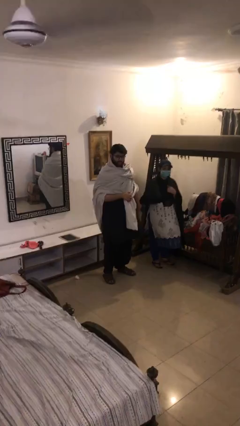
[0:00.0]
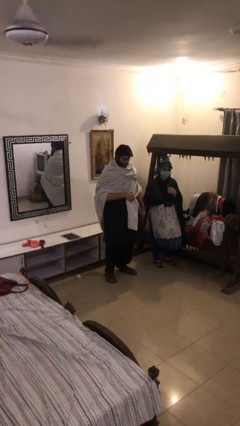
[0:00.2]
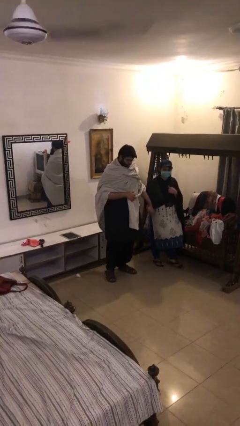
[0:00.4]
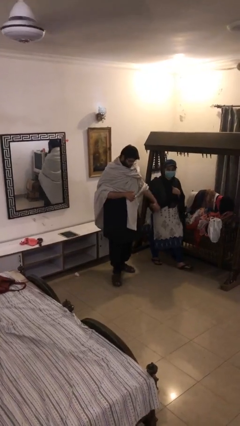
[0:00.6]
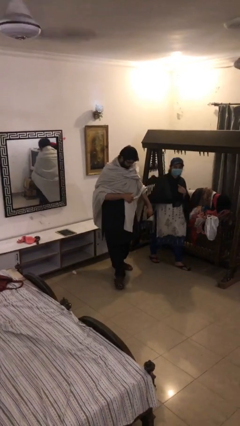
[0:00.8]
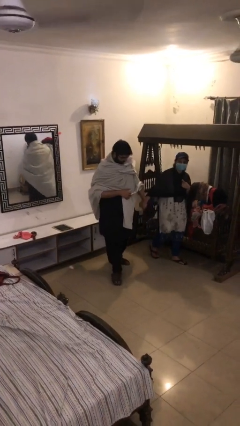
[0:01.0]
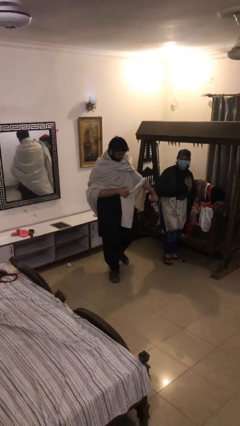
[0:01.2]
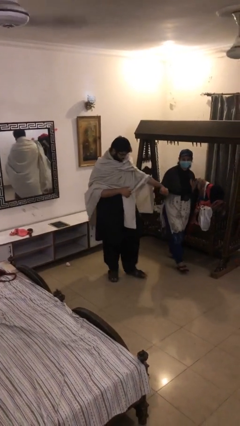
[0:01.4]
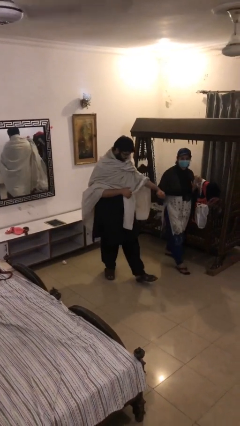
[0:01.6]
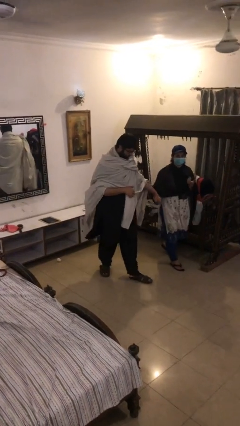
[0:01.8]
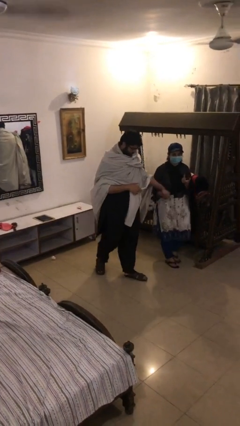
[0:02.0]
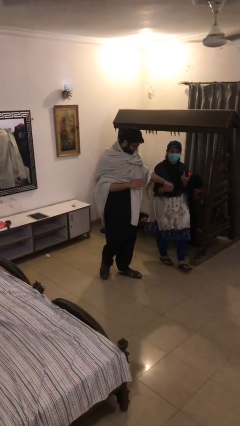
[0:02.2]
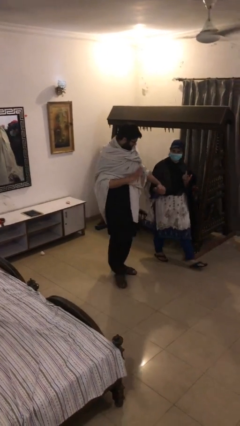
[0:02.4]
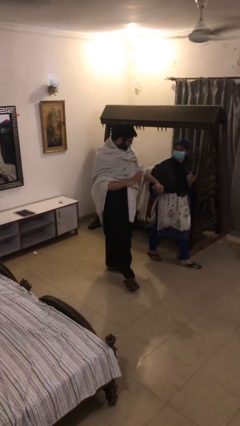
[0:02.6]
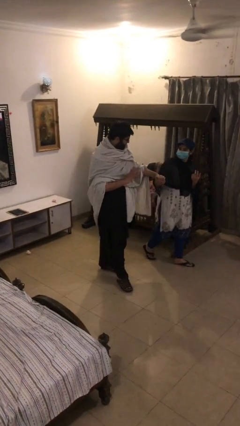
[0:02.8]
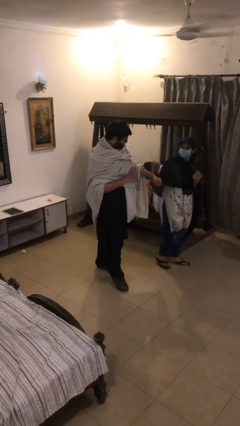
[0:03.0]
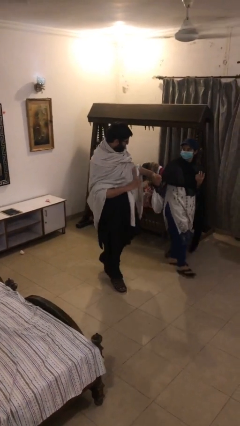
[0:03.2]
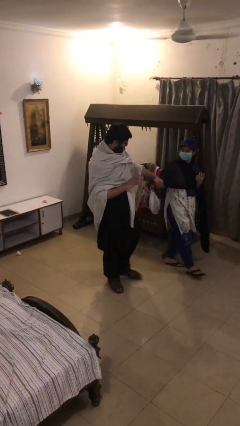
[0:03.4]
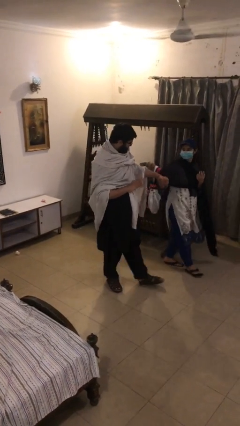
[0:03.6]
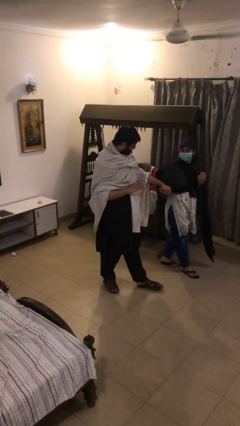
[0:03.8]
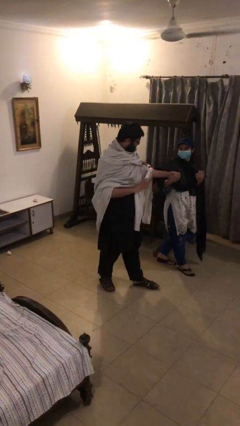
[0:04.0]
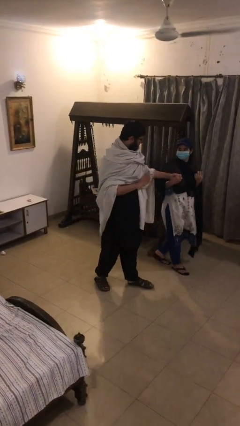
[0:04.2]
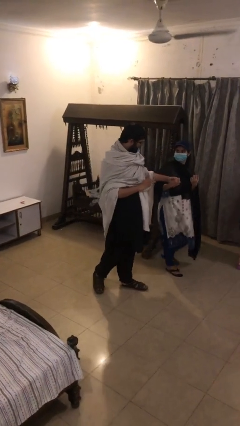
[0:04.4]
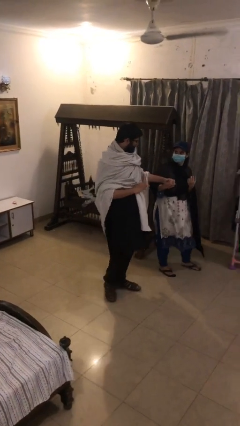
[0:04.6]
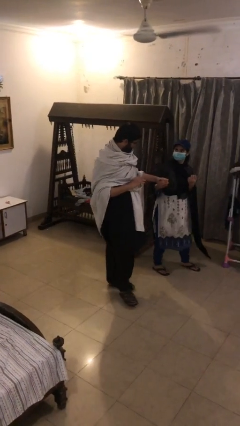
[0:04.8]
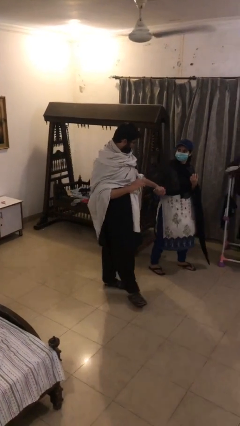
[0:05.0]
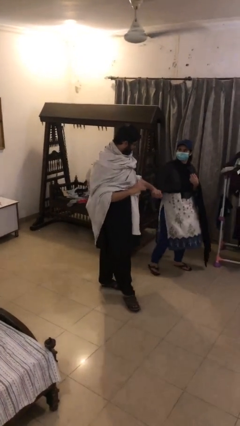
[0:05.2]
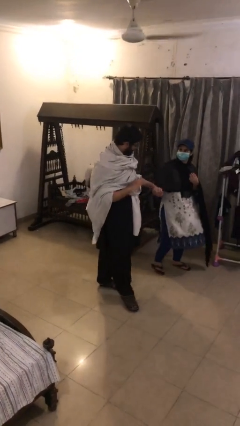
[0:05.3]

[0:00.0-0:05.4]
person holds hand

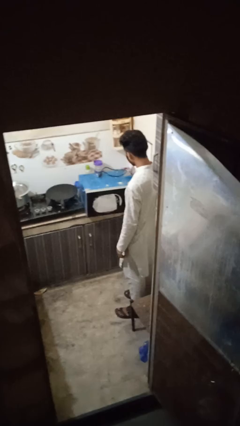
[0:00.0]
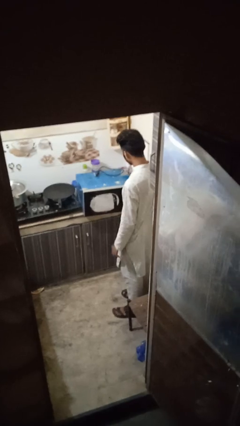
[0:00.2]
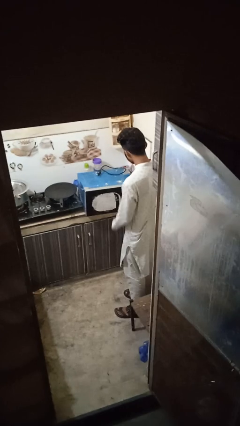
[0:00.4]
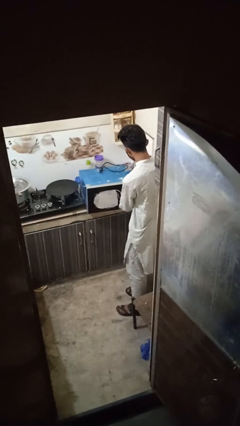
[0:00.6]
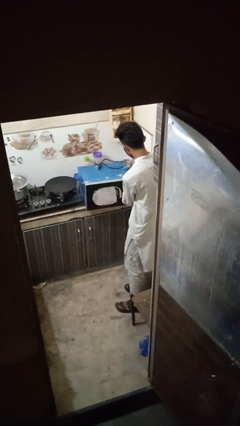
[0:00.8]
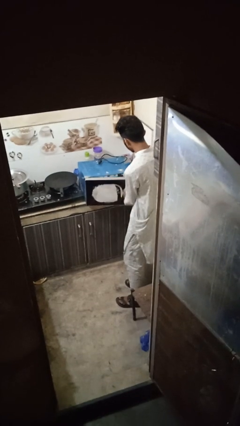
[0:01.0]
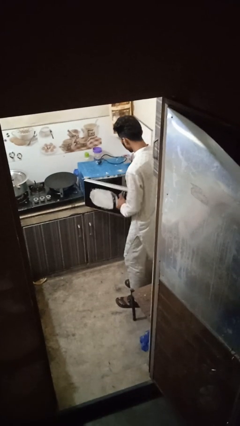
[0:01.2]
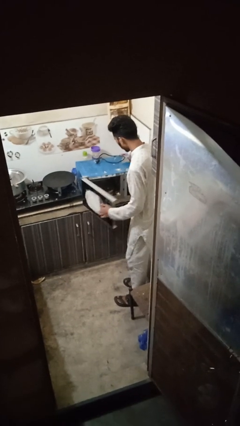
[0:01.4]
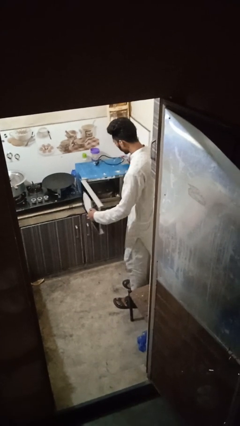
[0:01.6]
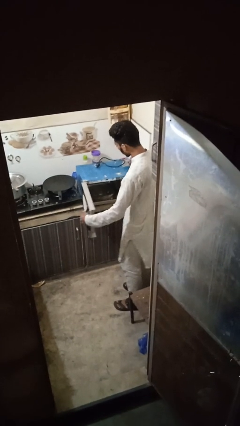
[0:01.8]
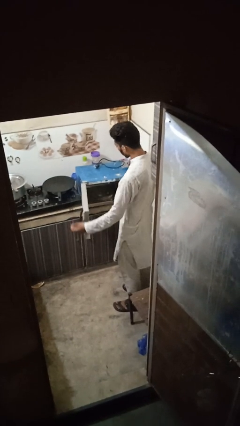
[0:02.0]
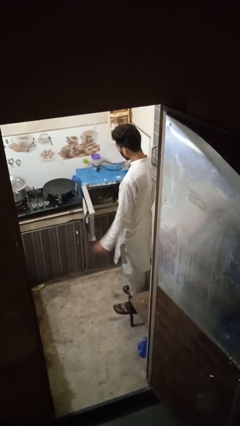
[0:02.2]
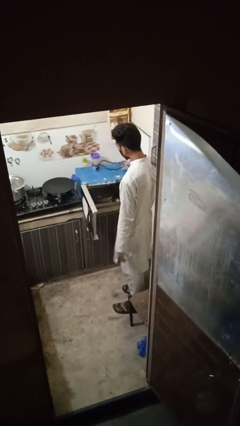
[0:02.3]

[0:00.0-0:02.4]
person opens oven door

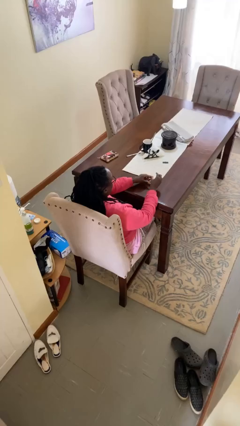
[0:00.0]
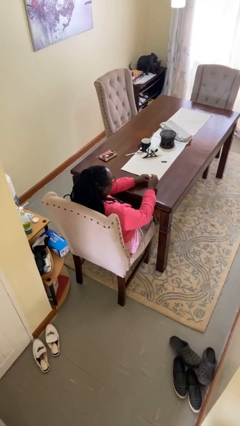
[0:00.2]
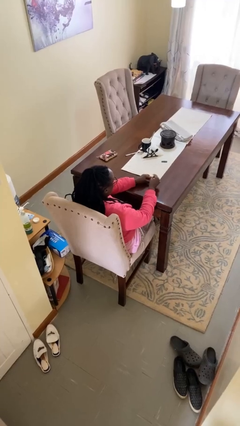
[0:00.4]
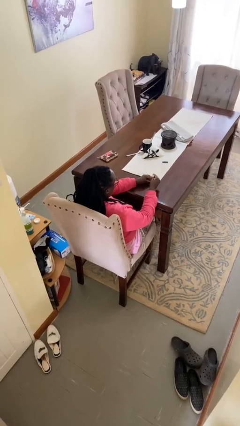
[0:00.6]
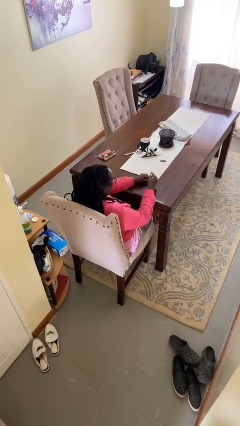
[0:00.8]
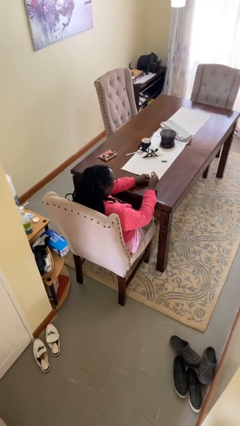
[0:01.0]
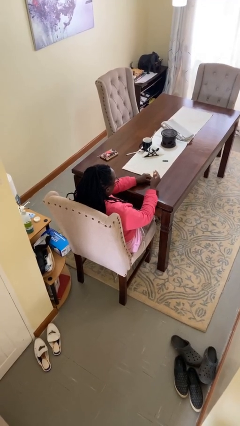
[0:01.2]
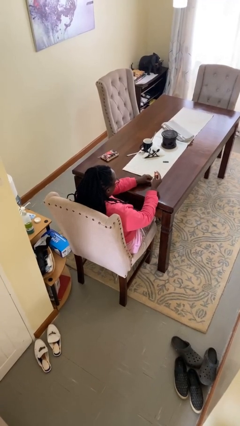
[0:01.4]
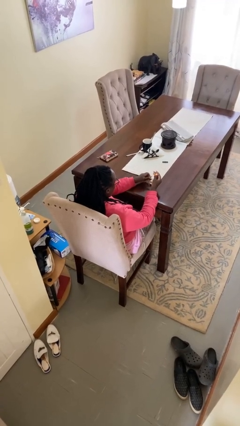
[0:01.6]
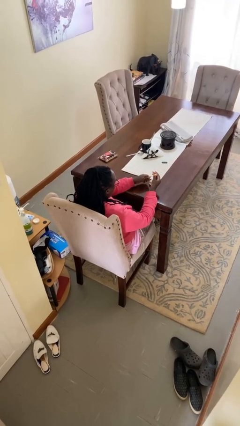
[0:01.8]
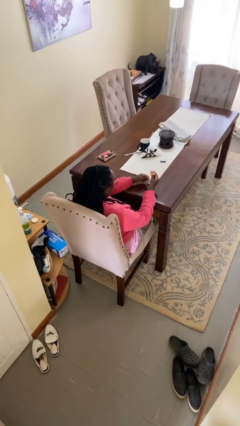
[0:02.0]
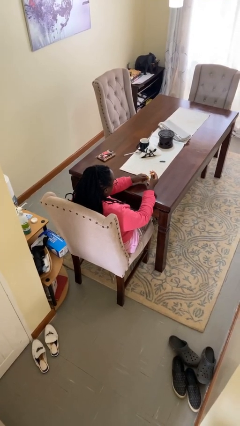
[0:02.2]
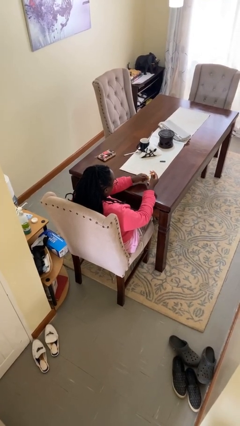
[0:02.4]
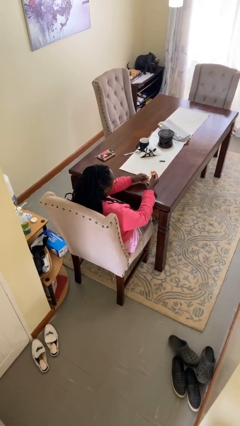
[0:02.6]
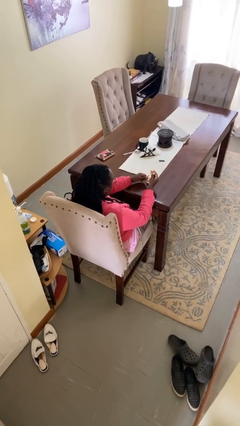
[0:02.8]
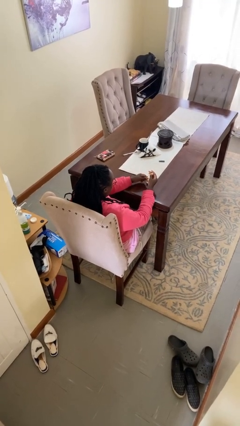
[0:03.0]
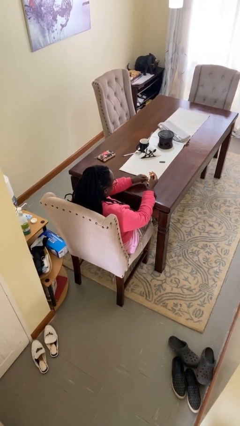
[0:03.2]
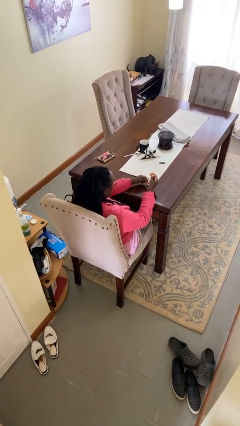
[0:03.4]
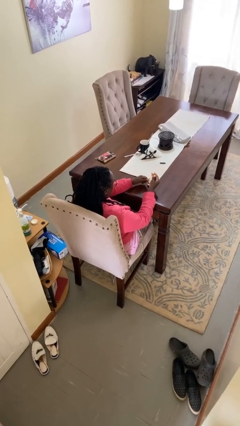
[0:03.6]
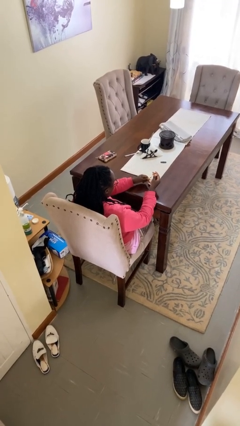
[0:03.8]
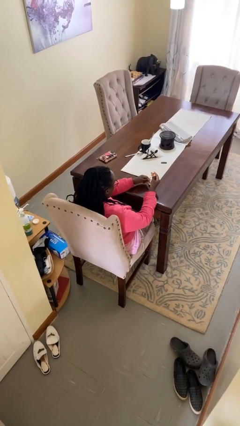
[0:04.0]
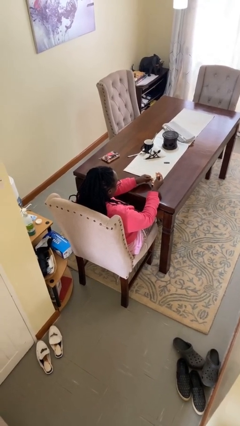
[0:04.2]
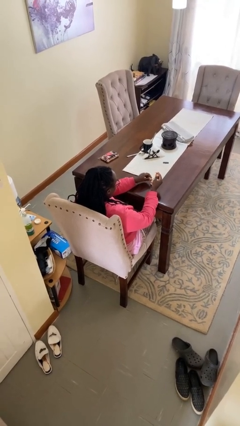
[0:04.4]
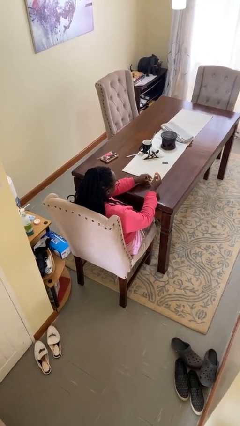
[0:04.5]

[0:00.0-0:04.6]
person paints fingernails

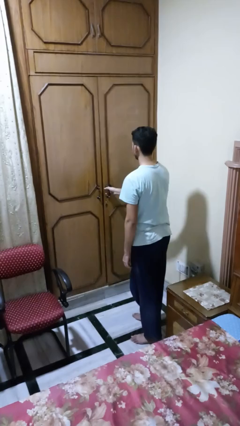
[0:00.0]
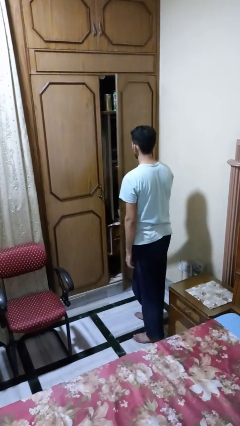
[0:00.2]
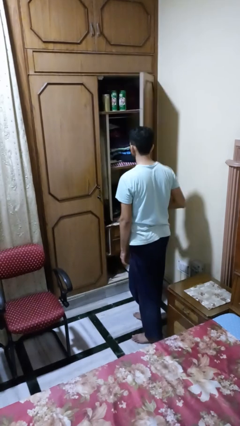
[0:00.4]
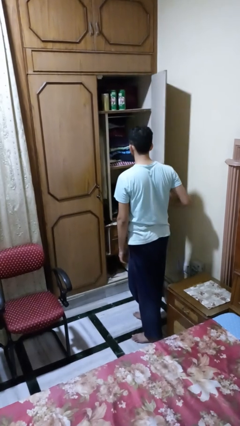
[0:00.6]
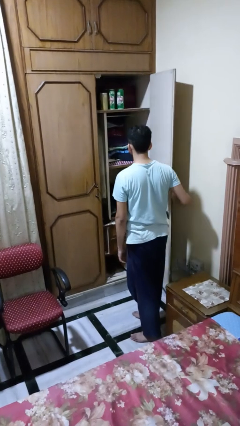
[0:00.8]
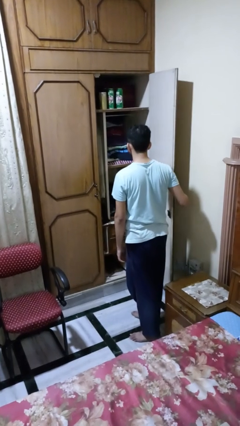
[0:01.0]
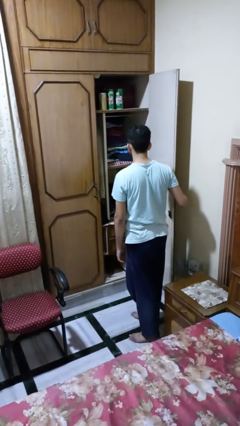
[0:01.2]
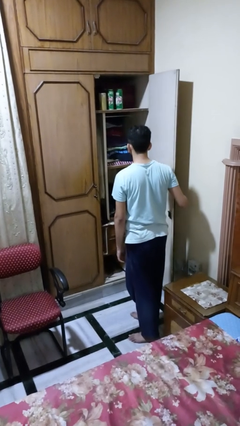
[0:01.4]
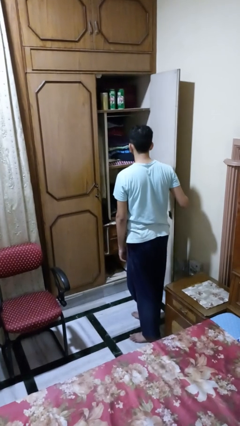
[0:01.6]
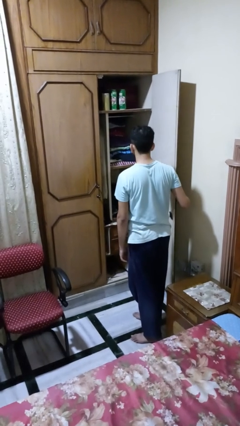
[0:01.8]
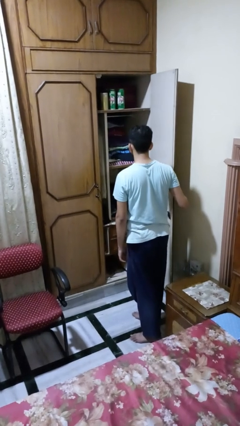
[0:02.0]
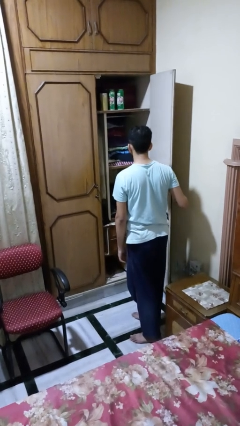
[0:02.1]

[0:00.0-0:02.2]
person opens closet door

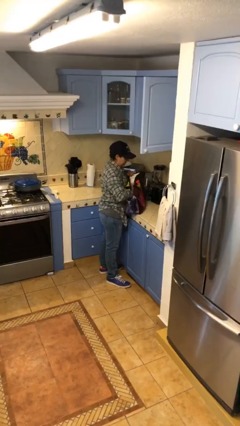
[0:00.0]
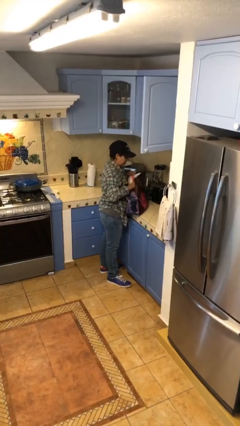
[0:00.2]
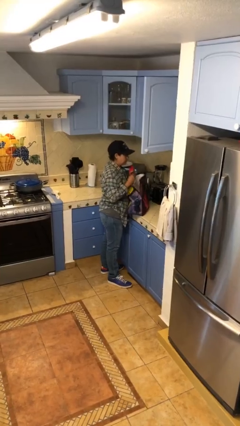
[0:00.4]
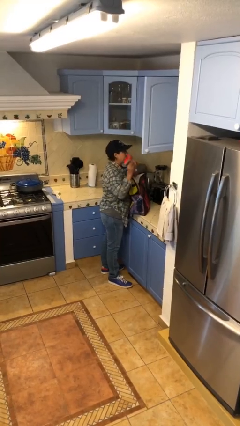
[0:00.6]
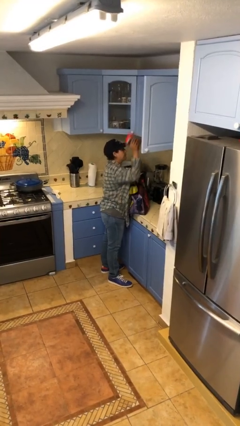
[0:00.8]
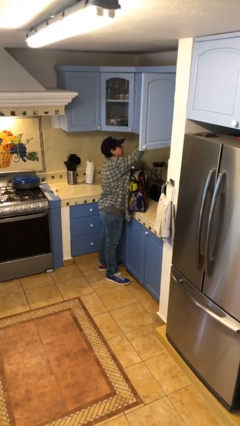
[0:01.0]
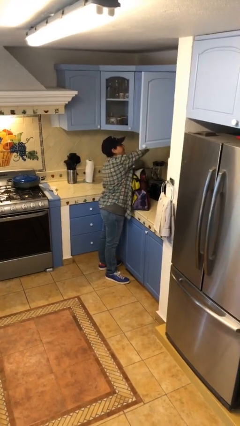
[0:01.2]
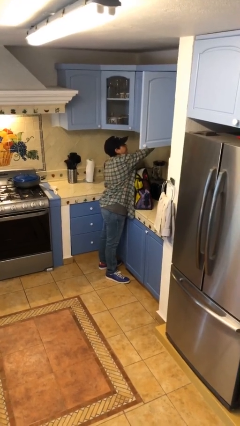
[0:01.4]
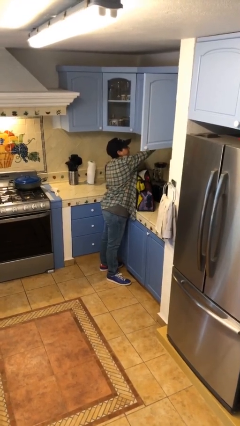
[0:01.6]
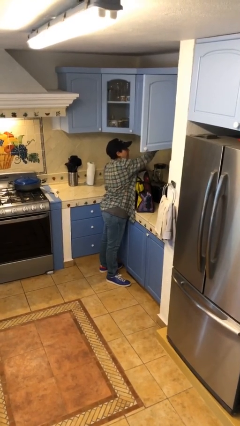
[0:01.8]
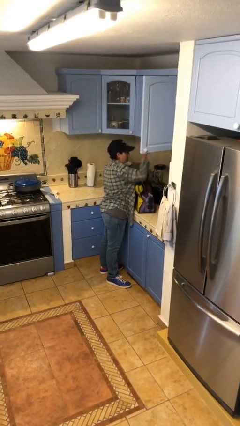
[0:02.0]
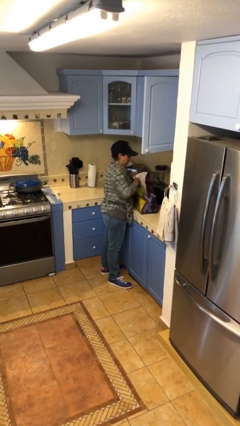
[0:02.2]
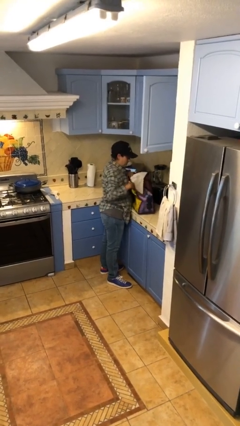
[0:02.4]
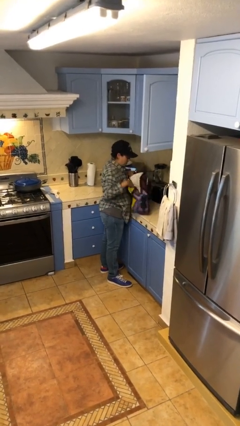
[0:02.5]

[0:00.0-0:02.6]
person loads groceries into cabinet

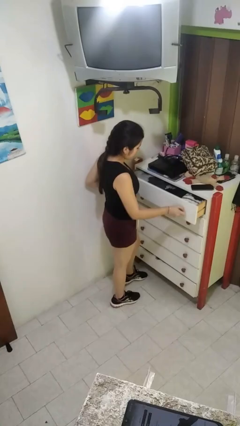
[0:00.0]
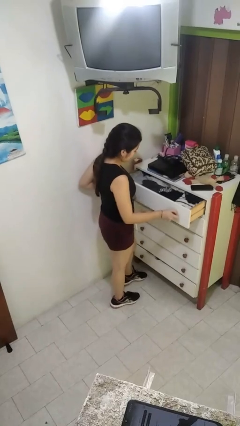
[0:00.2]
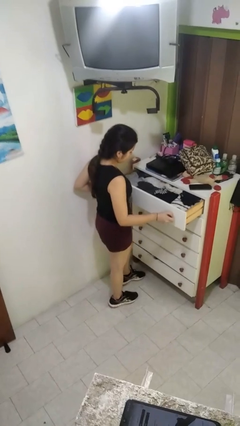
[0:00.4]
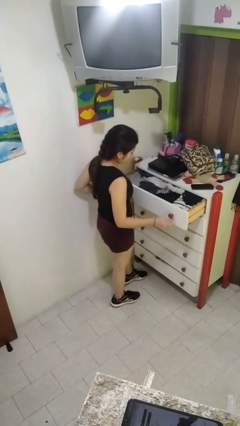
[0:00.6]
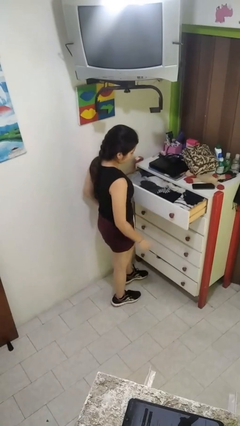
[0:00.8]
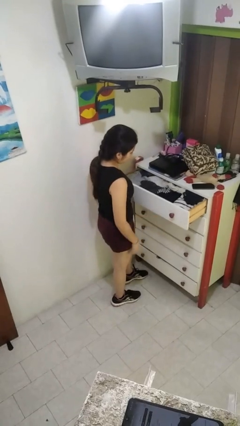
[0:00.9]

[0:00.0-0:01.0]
person opens dresser drawer
